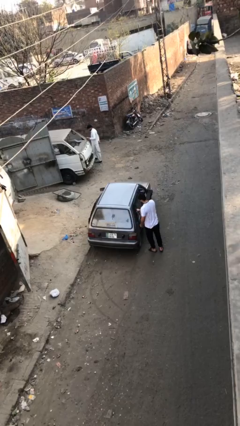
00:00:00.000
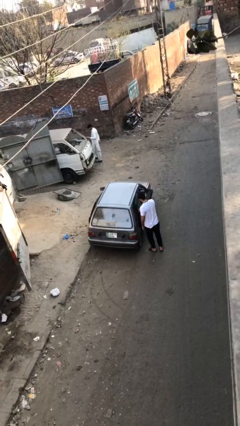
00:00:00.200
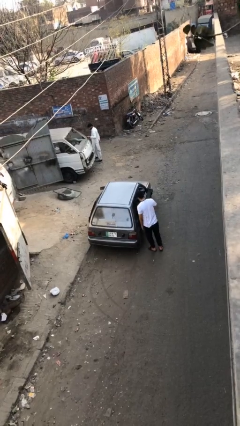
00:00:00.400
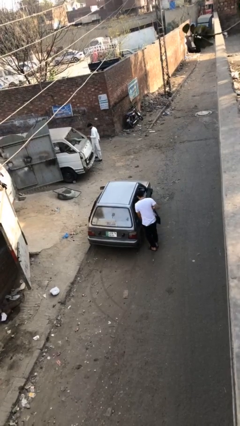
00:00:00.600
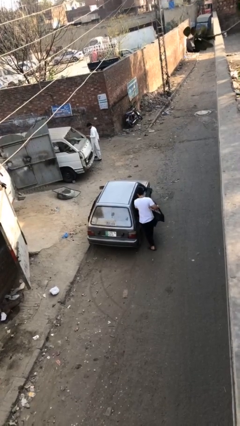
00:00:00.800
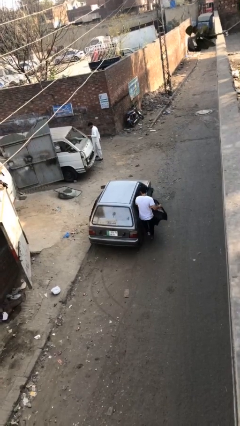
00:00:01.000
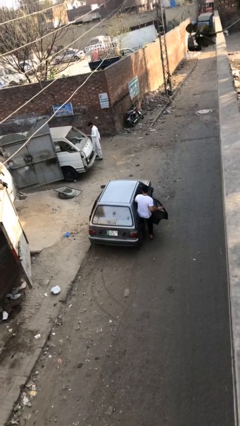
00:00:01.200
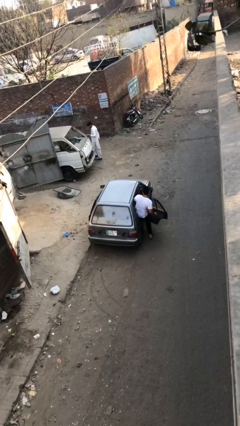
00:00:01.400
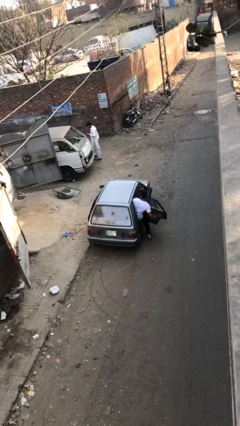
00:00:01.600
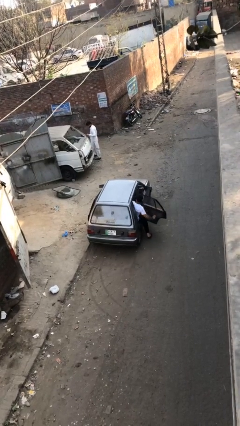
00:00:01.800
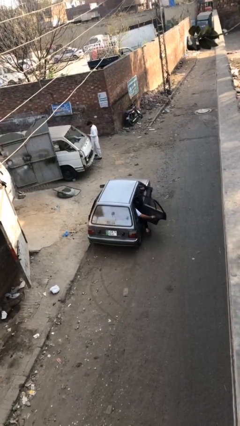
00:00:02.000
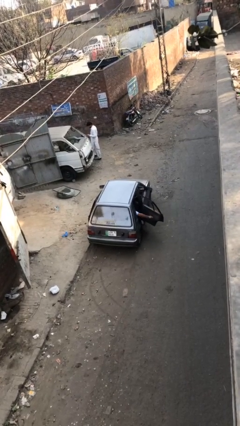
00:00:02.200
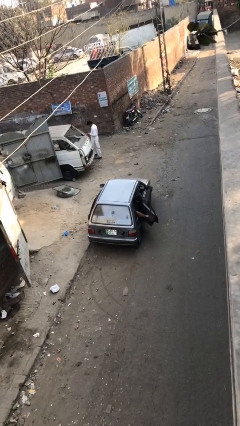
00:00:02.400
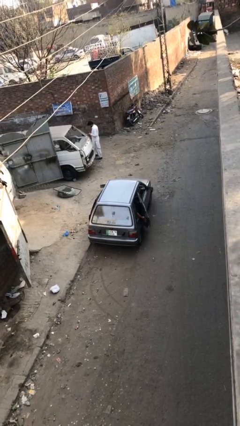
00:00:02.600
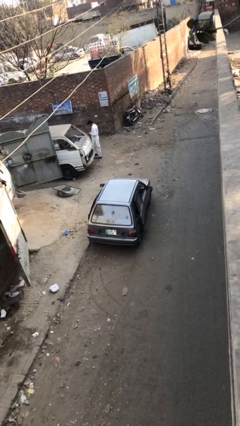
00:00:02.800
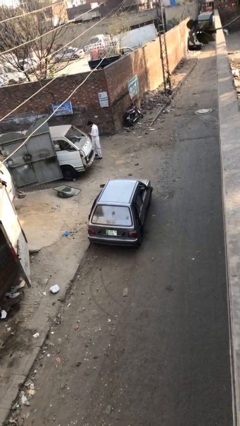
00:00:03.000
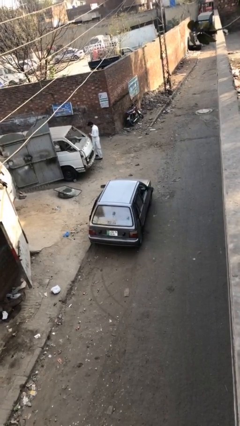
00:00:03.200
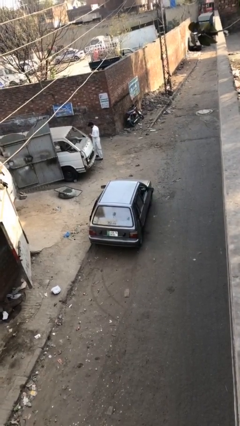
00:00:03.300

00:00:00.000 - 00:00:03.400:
car picks up person

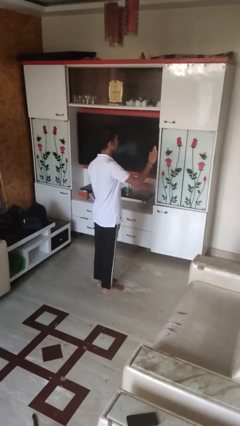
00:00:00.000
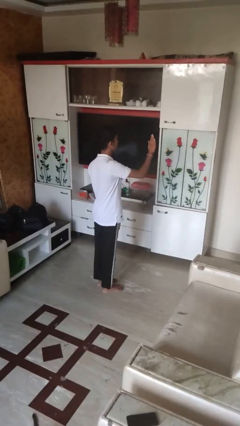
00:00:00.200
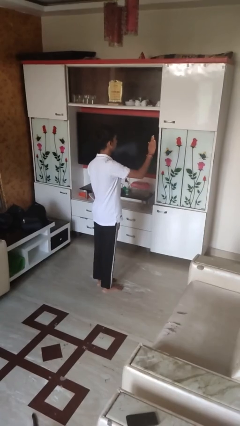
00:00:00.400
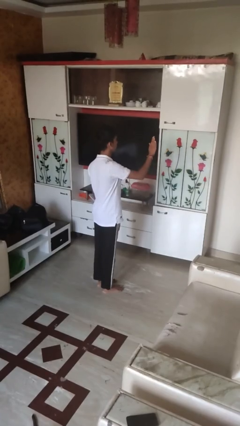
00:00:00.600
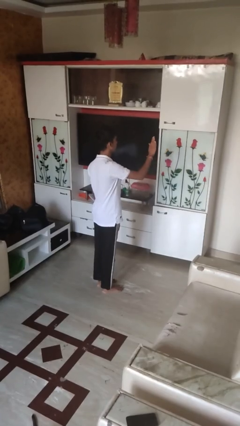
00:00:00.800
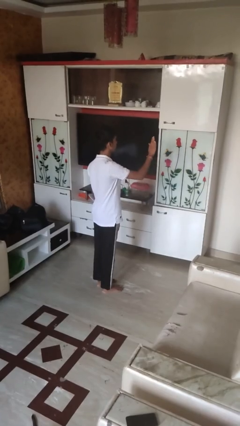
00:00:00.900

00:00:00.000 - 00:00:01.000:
person gestures swipe up

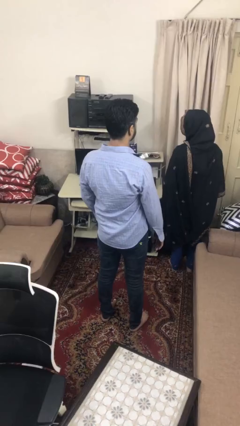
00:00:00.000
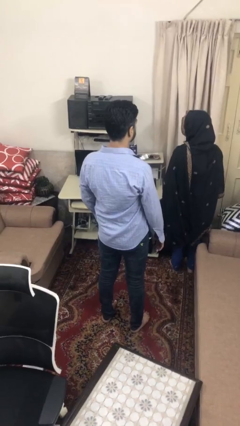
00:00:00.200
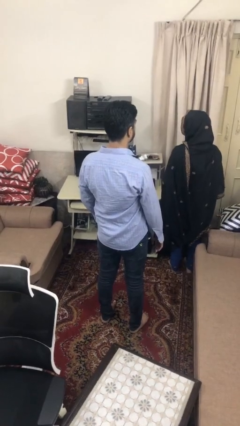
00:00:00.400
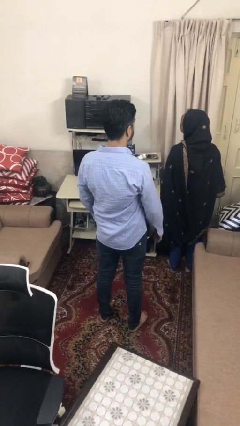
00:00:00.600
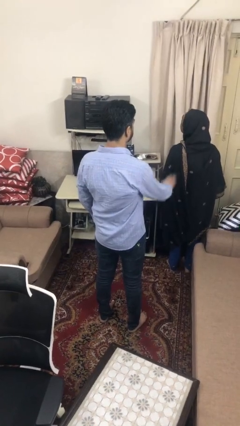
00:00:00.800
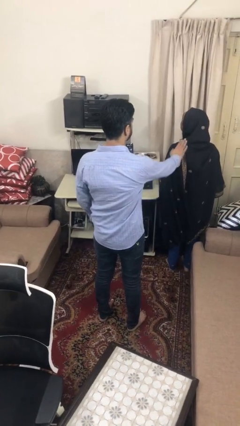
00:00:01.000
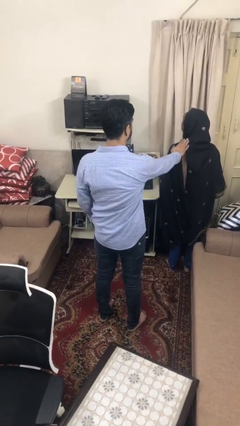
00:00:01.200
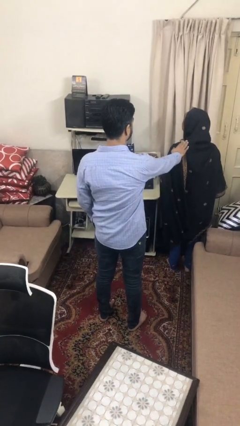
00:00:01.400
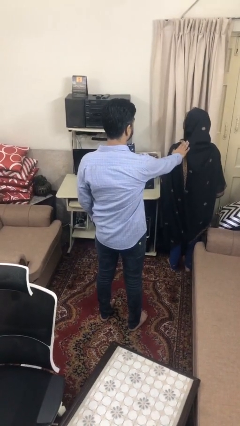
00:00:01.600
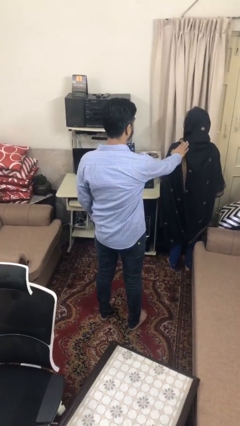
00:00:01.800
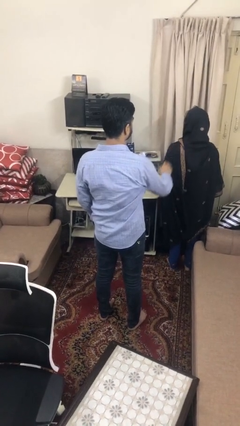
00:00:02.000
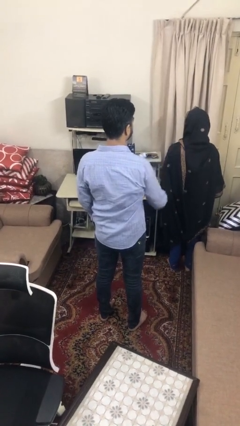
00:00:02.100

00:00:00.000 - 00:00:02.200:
person touches back of person

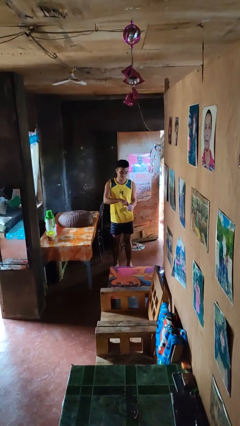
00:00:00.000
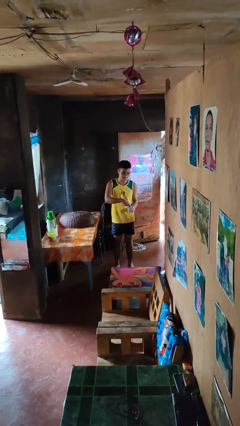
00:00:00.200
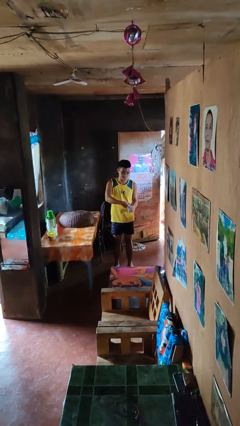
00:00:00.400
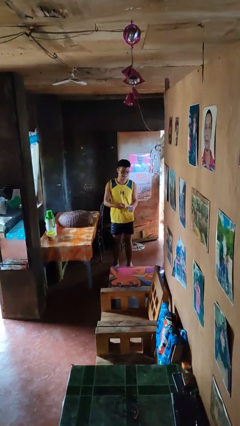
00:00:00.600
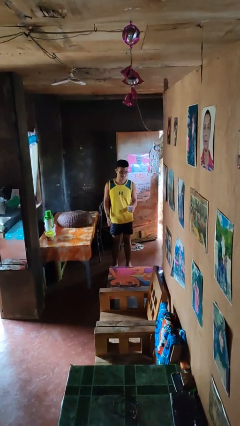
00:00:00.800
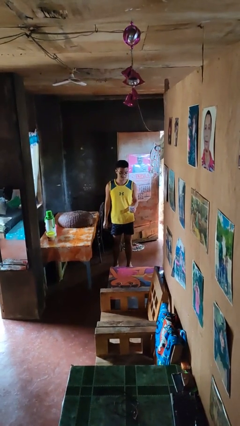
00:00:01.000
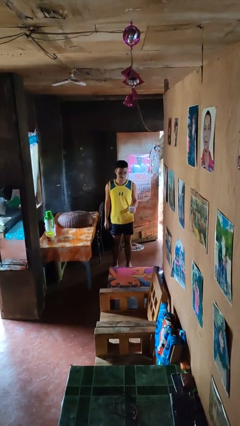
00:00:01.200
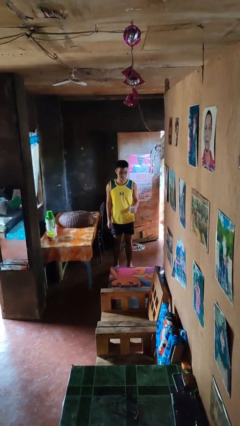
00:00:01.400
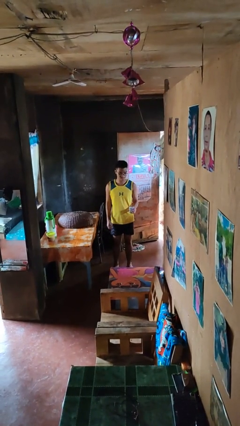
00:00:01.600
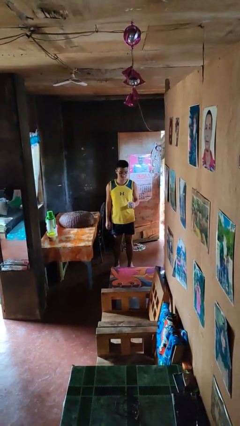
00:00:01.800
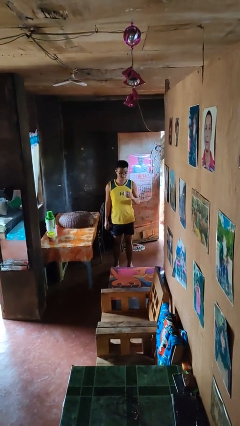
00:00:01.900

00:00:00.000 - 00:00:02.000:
person opens beverage can

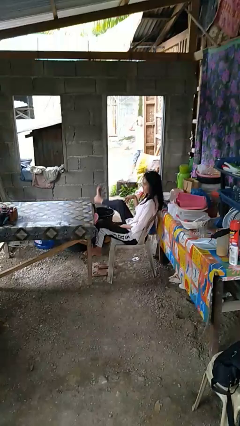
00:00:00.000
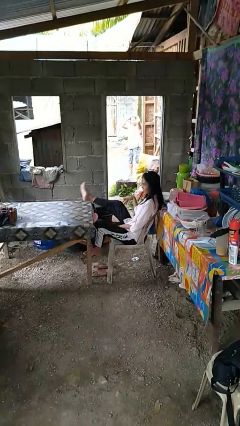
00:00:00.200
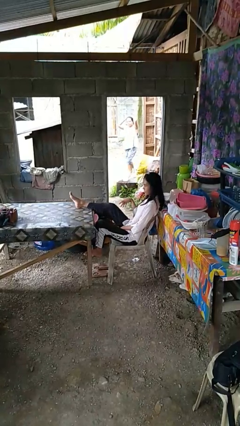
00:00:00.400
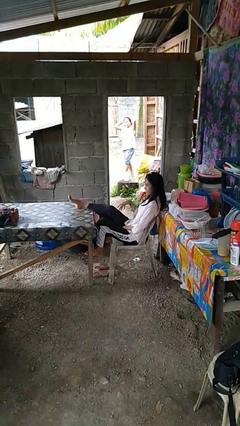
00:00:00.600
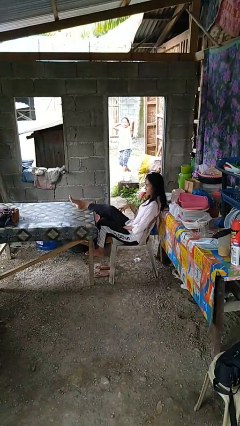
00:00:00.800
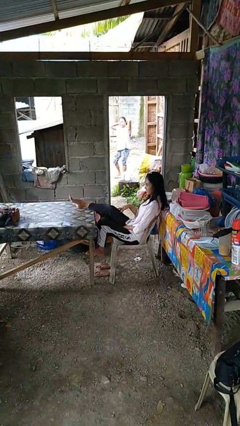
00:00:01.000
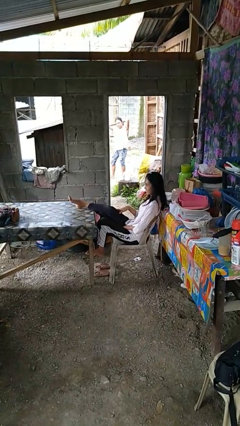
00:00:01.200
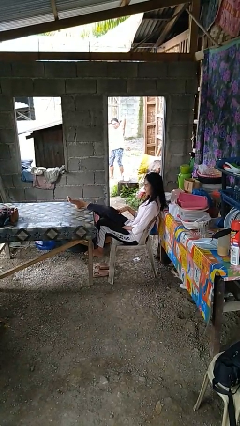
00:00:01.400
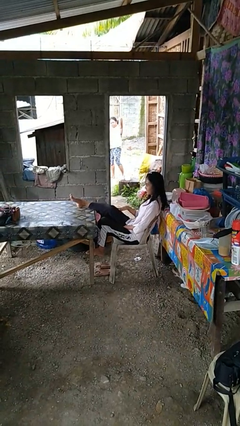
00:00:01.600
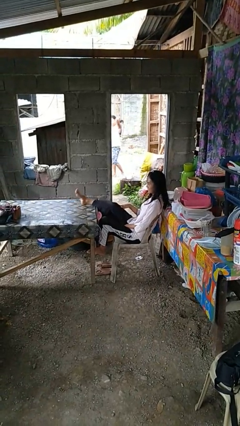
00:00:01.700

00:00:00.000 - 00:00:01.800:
person puts feet up

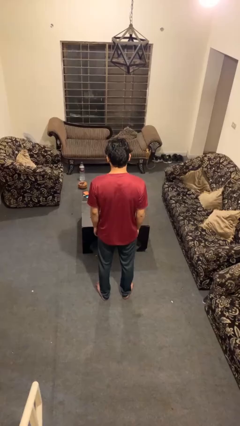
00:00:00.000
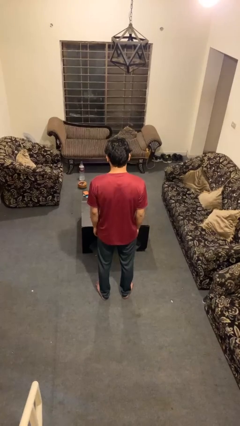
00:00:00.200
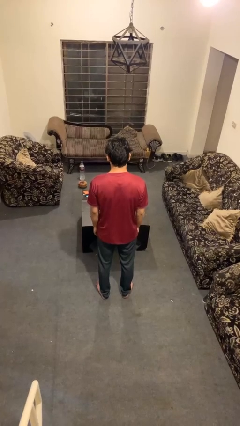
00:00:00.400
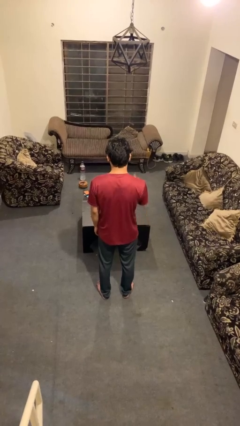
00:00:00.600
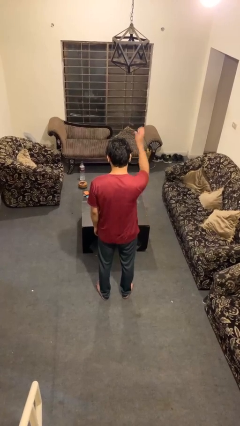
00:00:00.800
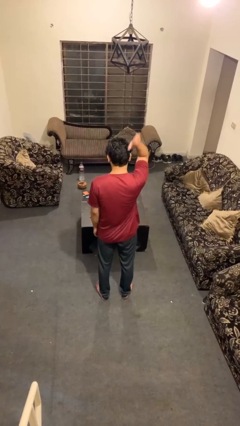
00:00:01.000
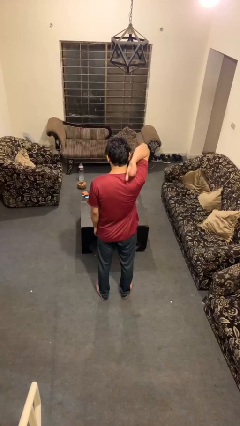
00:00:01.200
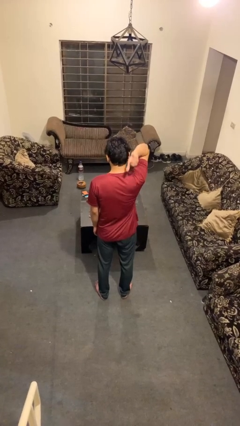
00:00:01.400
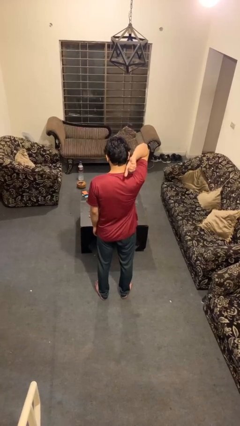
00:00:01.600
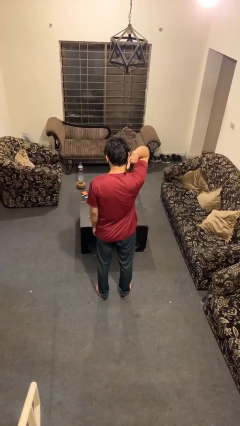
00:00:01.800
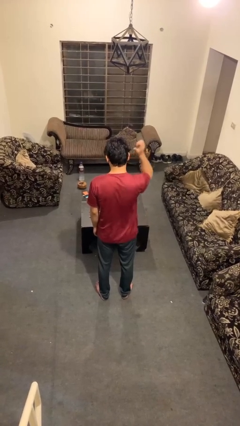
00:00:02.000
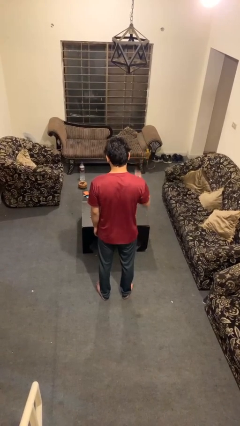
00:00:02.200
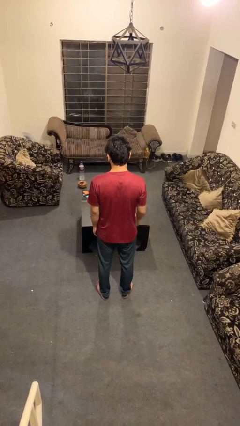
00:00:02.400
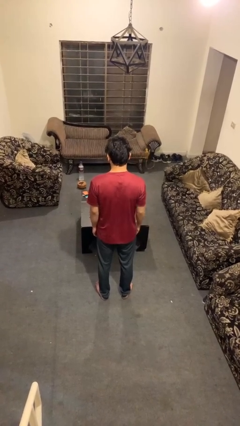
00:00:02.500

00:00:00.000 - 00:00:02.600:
person gestures behind me

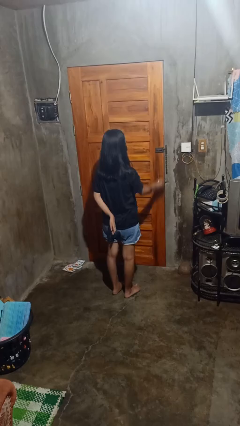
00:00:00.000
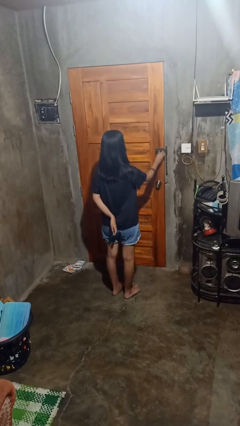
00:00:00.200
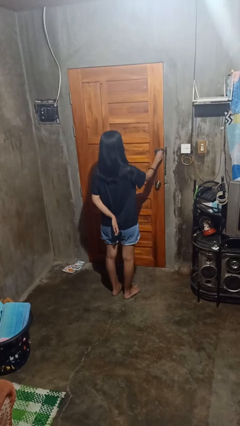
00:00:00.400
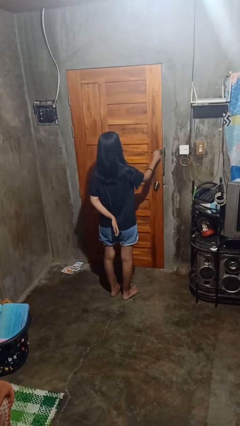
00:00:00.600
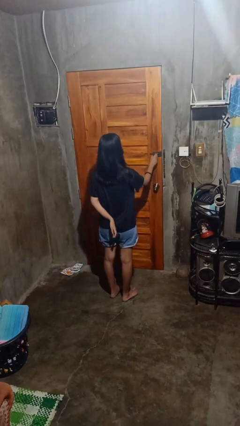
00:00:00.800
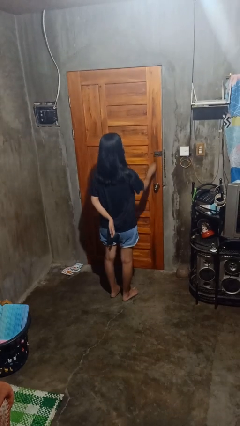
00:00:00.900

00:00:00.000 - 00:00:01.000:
person unlocks door with keys

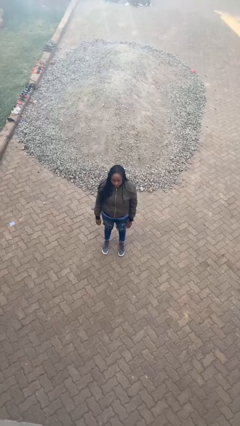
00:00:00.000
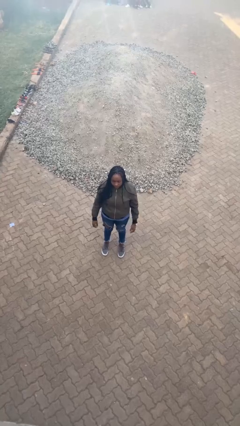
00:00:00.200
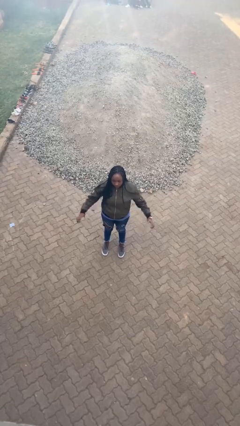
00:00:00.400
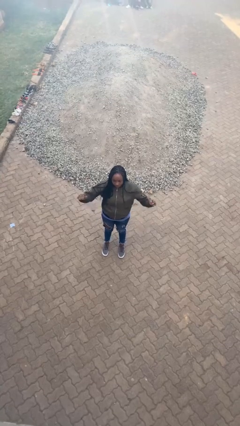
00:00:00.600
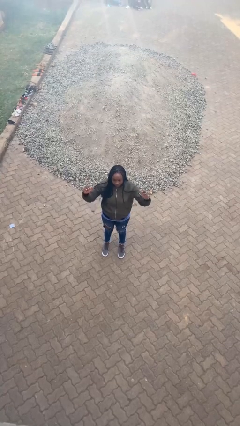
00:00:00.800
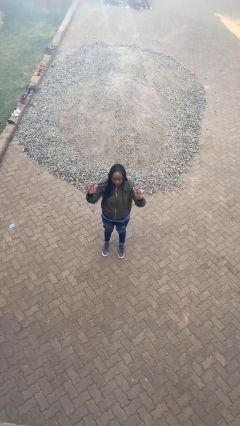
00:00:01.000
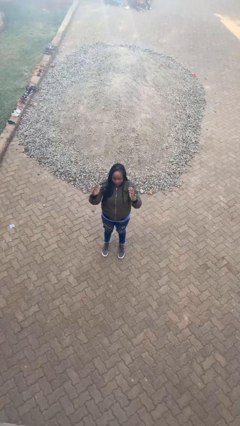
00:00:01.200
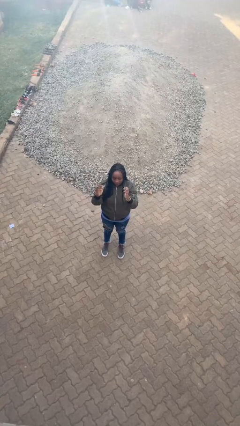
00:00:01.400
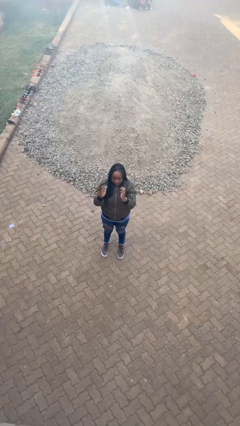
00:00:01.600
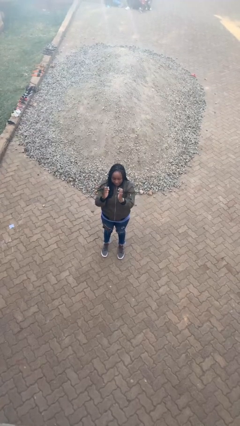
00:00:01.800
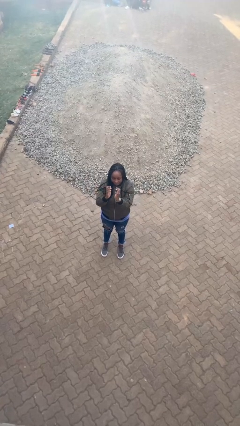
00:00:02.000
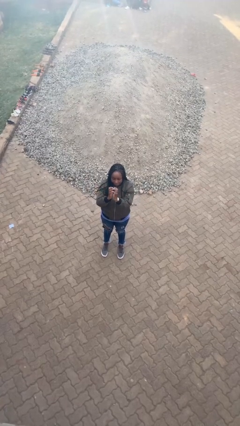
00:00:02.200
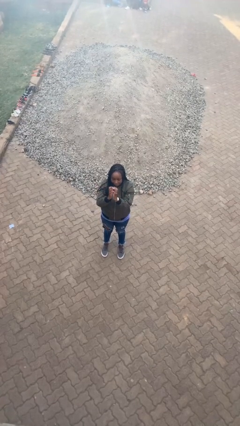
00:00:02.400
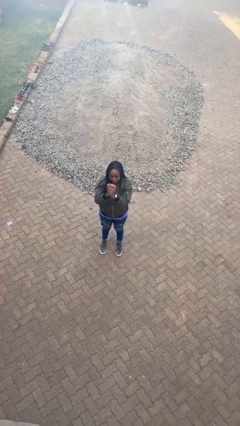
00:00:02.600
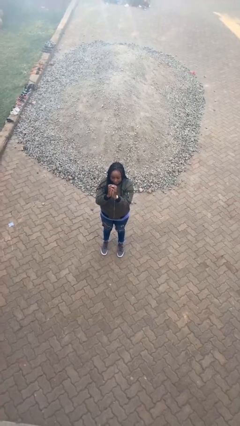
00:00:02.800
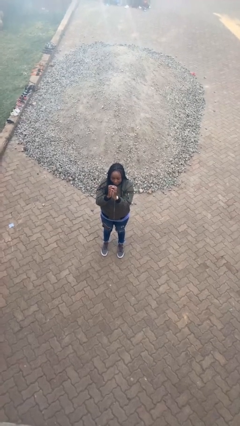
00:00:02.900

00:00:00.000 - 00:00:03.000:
person gestures zoom in

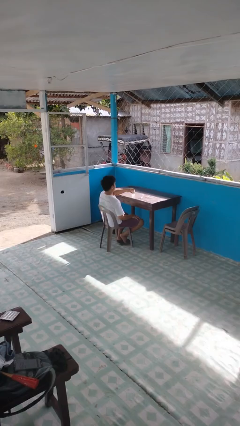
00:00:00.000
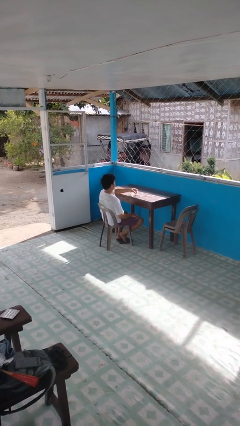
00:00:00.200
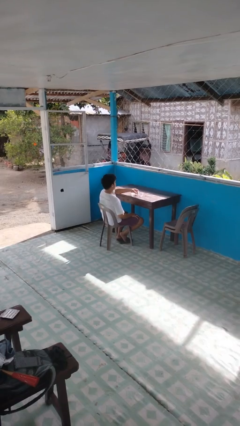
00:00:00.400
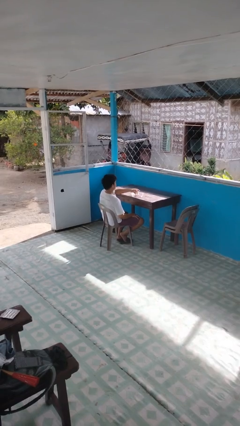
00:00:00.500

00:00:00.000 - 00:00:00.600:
person puts down object on table
